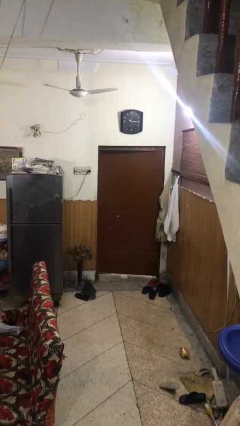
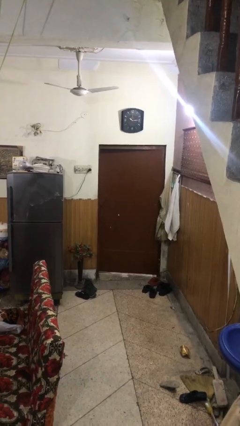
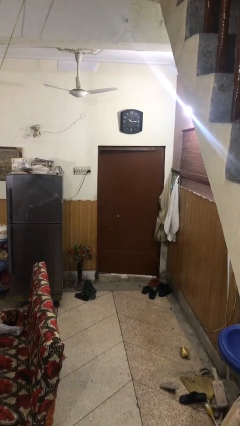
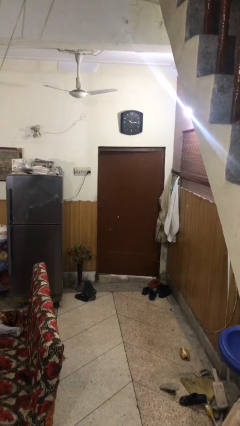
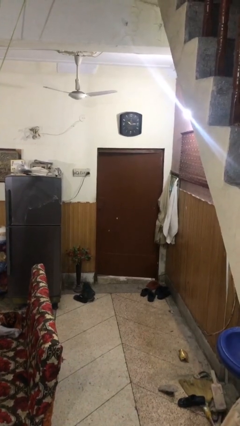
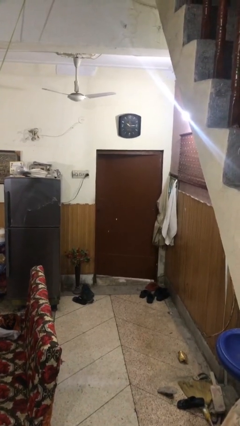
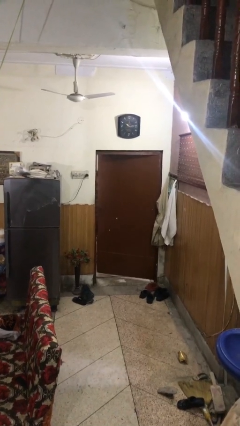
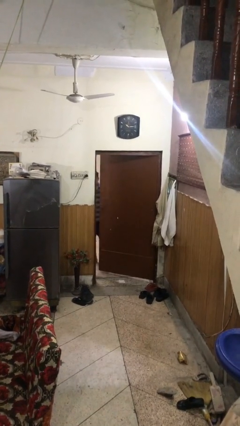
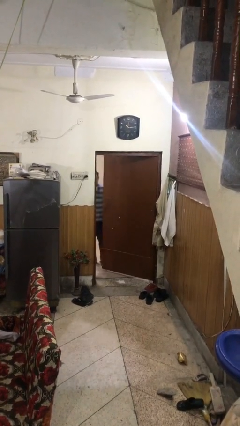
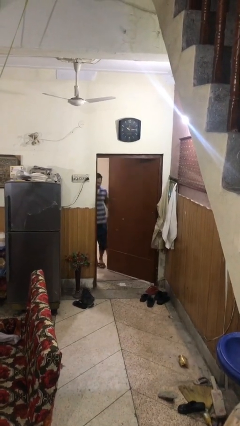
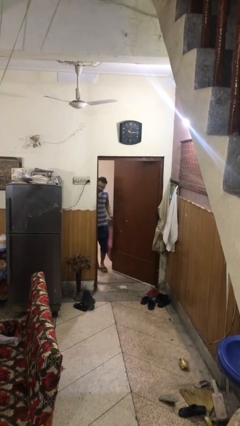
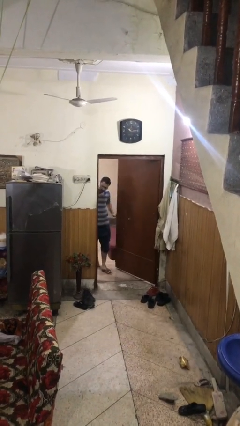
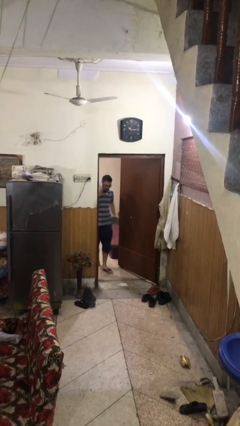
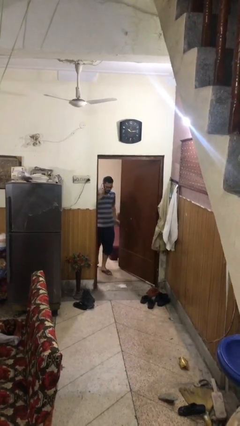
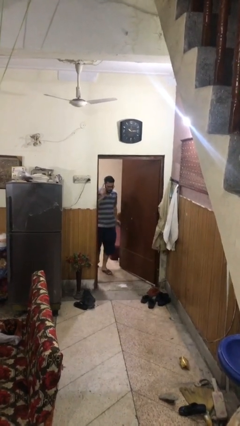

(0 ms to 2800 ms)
person opens facility door

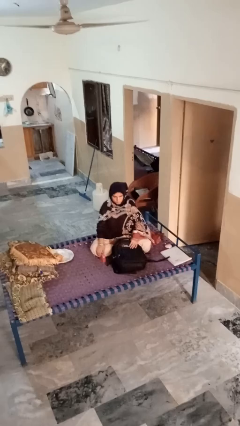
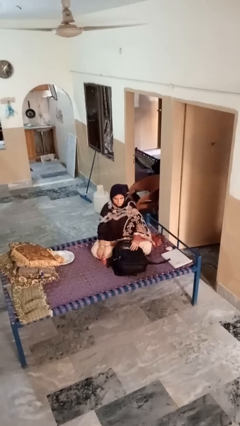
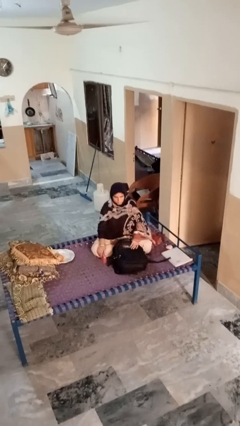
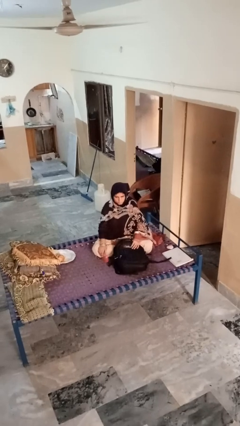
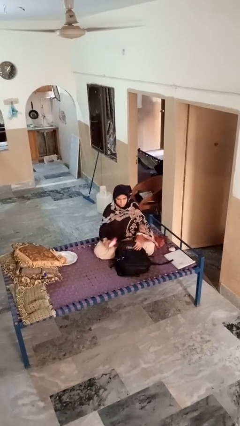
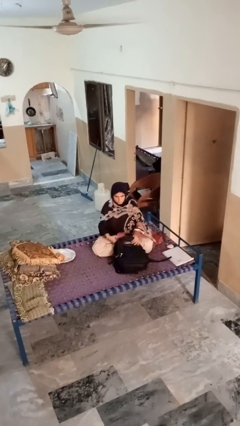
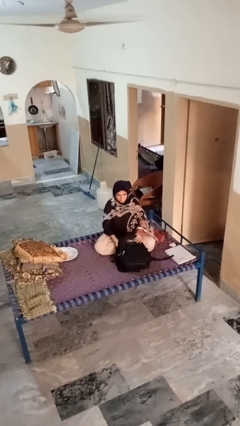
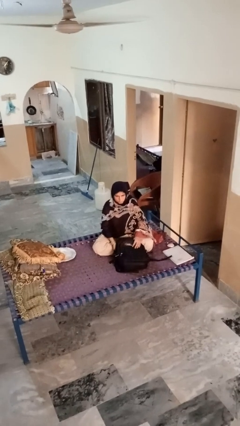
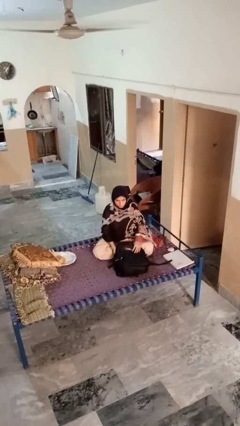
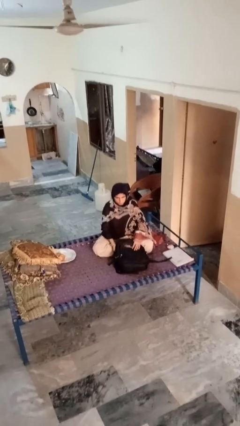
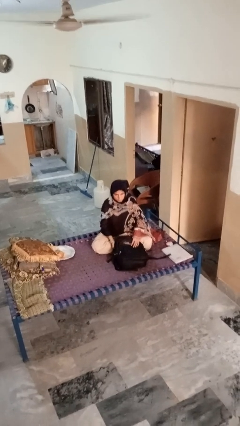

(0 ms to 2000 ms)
person puts object into bag

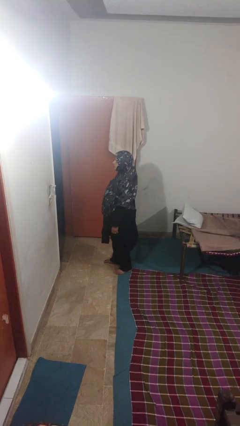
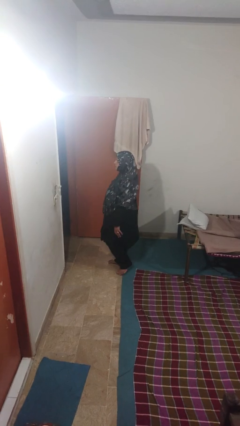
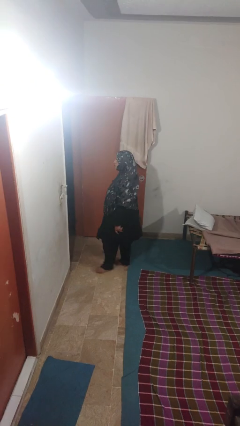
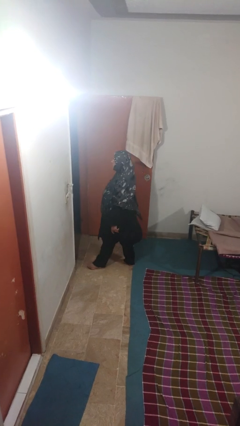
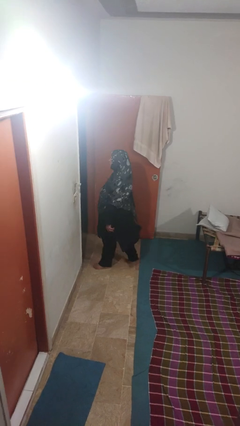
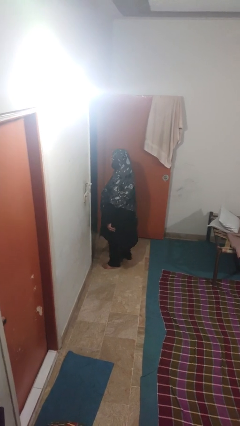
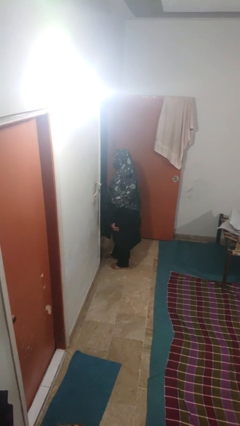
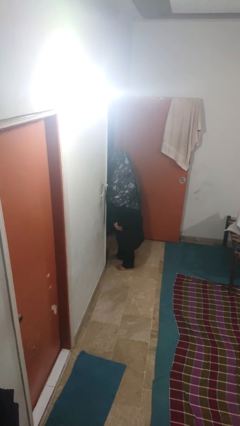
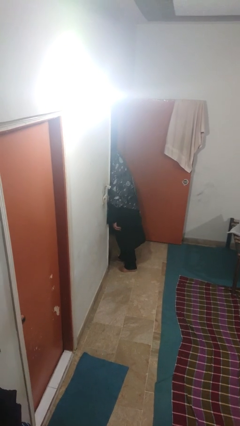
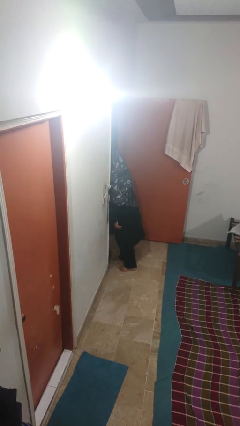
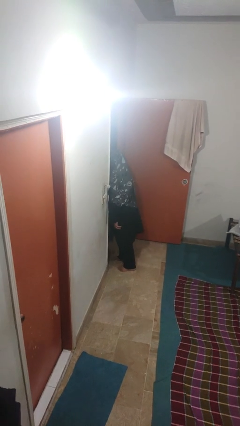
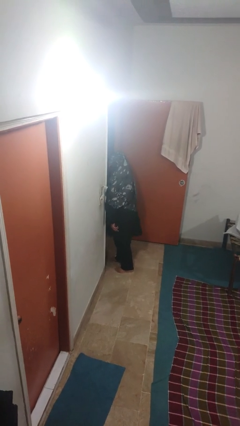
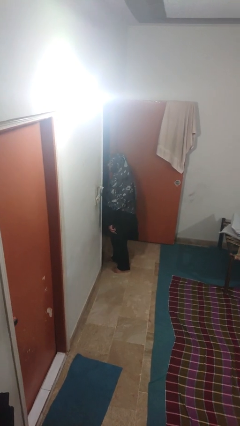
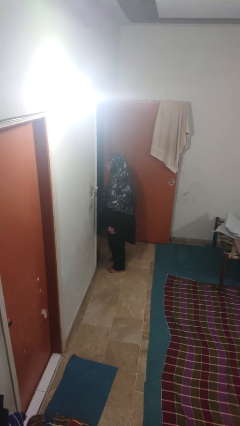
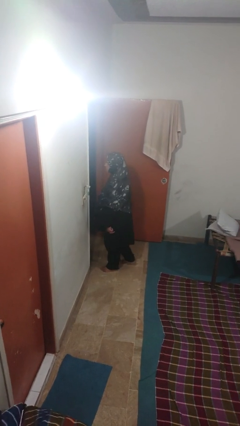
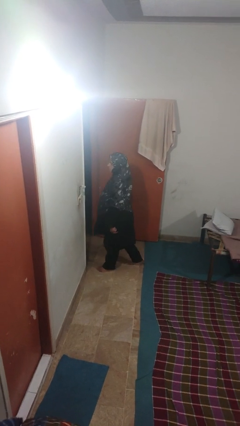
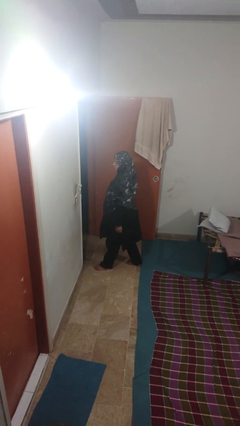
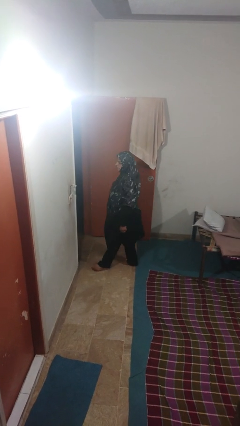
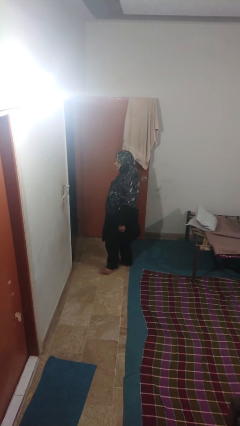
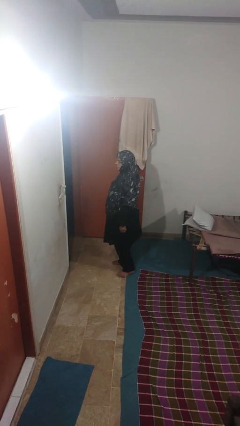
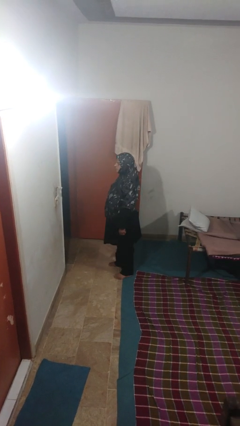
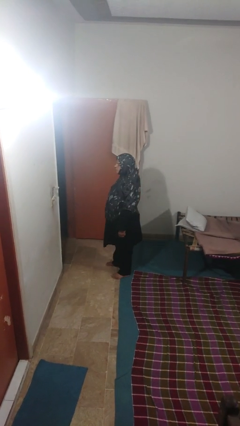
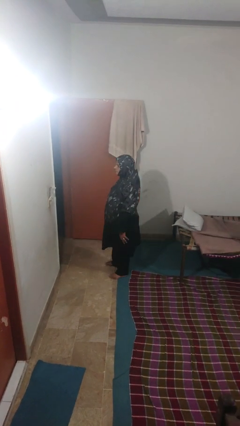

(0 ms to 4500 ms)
person bumps into wall

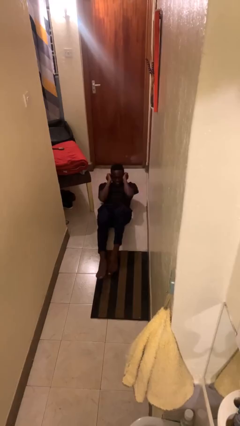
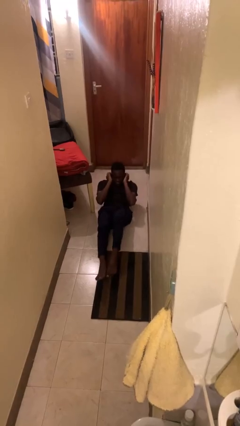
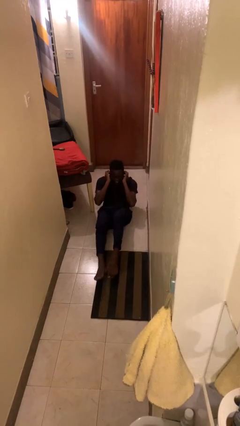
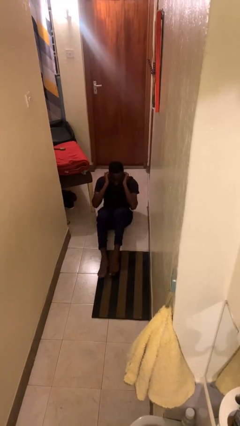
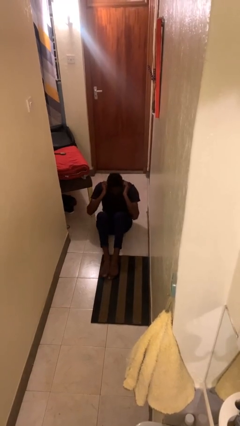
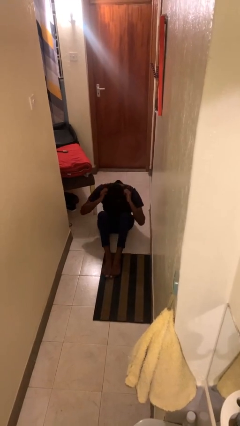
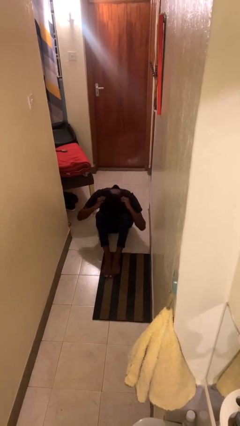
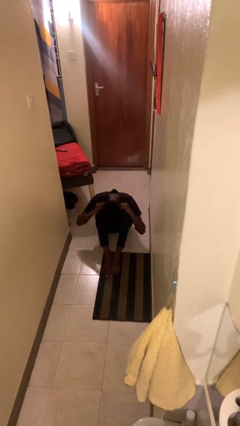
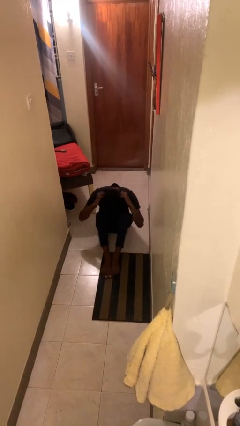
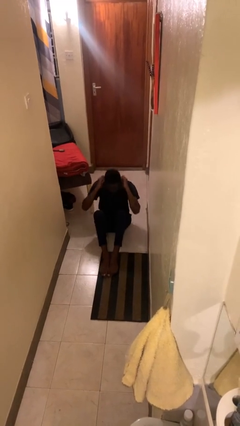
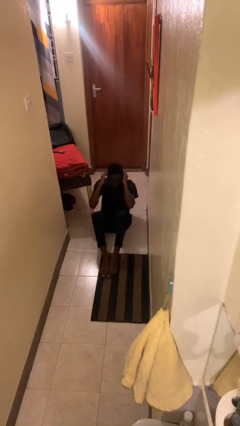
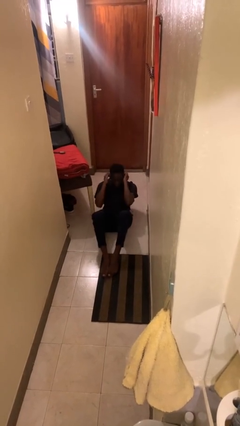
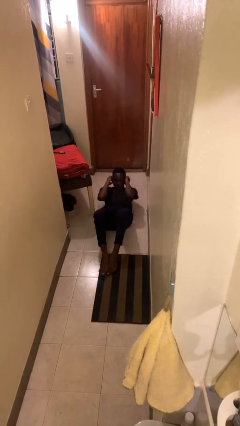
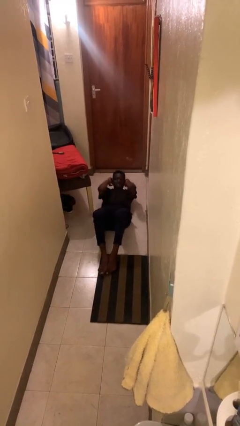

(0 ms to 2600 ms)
person exercises with situp

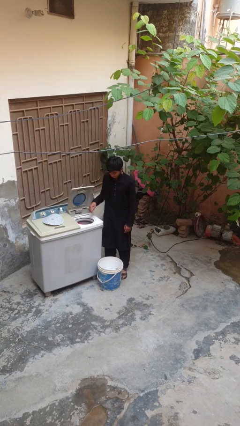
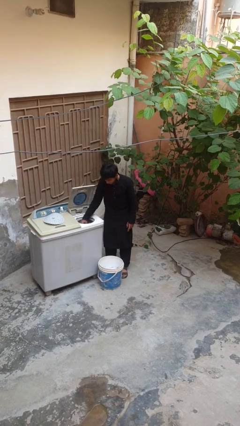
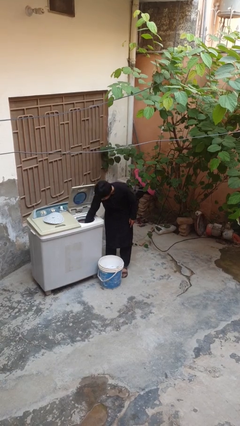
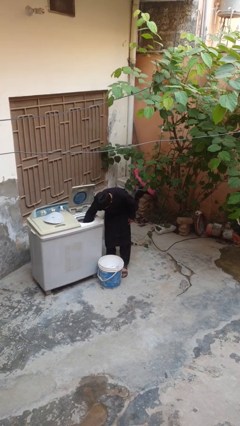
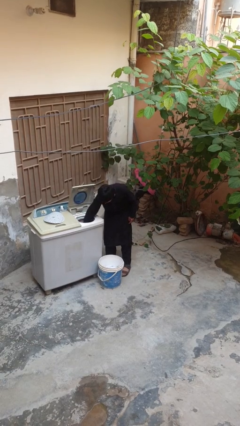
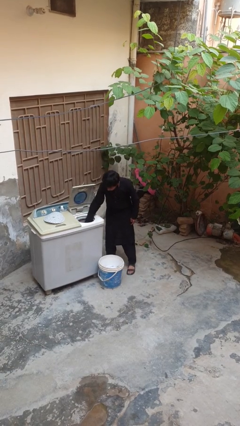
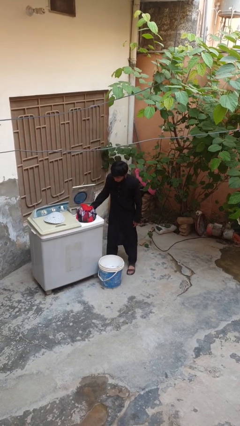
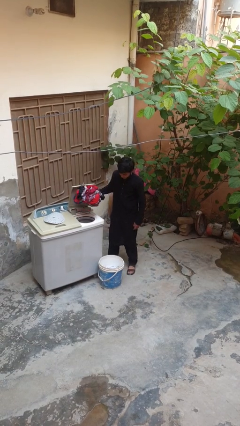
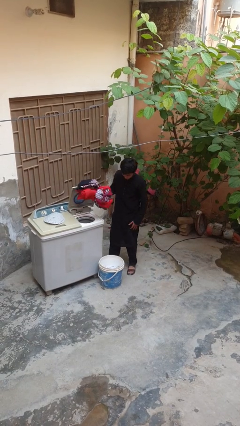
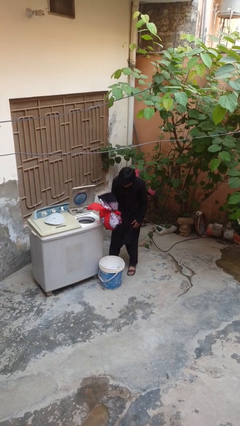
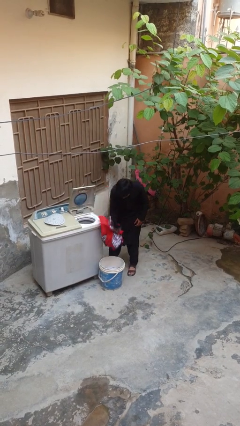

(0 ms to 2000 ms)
person unloads dryer

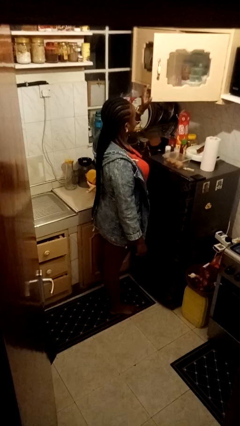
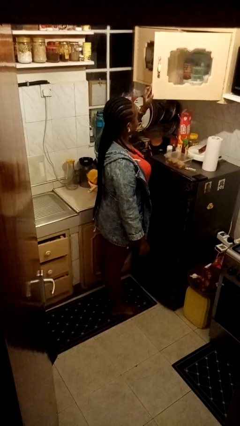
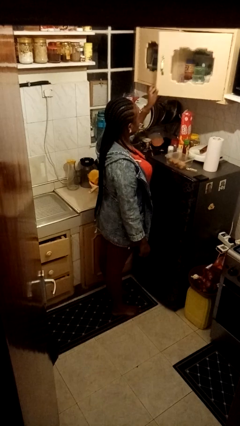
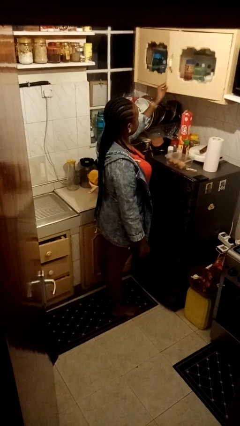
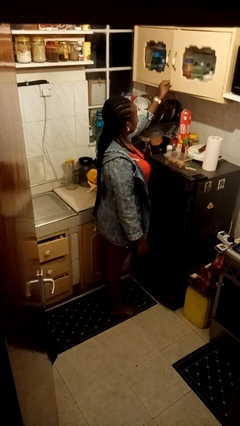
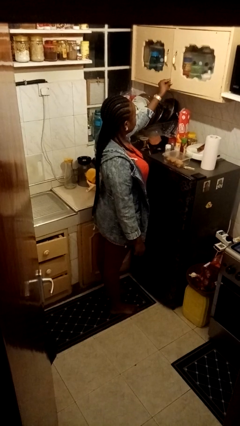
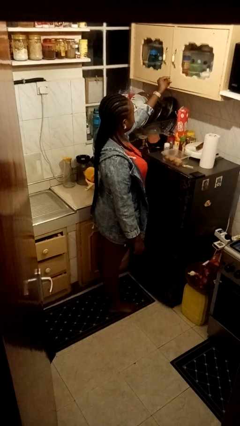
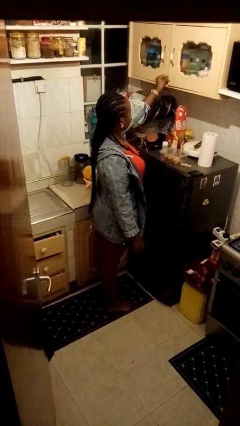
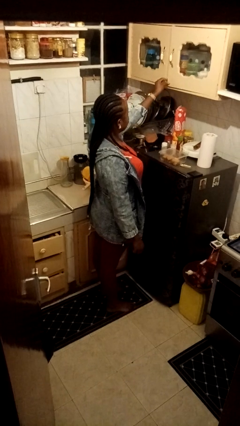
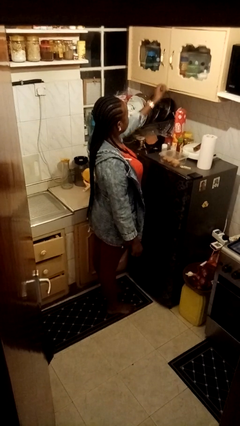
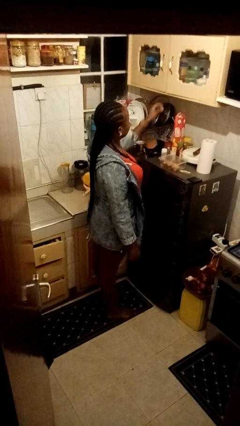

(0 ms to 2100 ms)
person closes cabinet

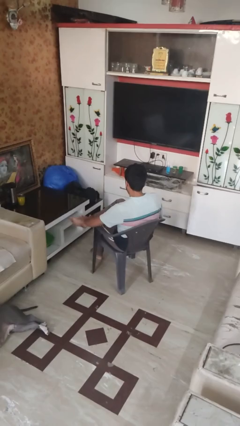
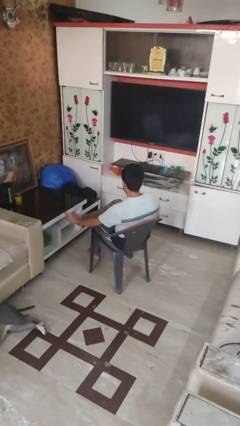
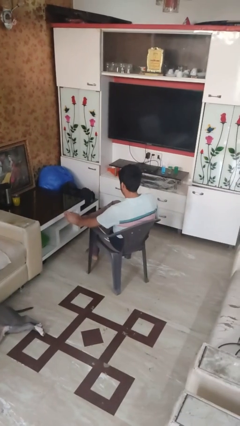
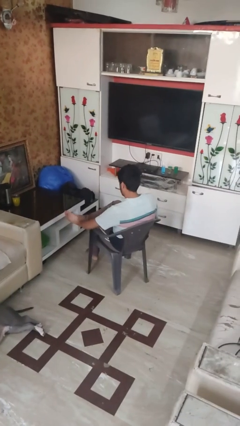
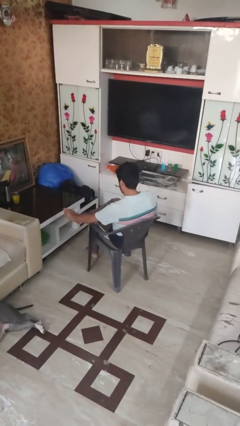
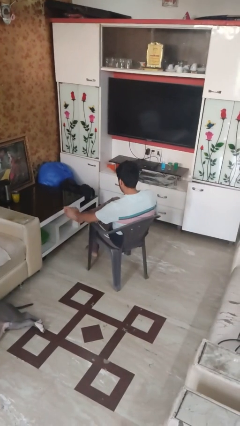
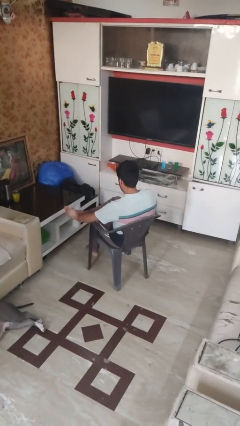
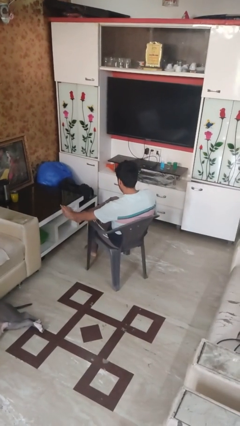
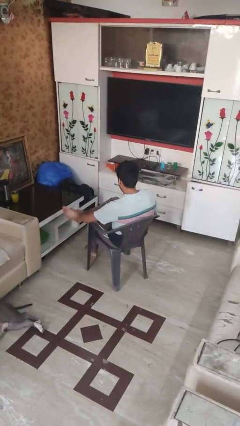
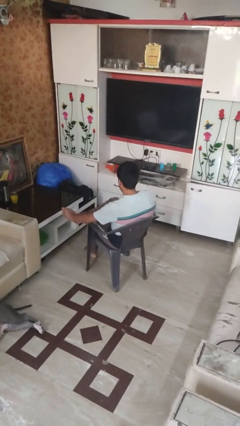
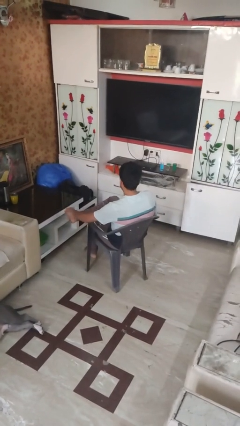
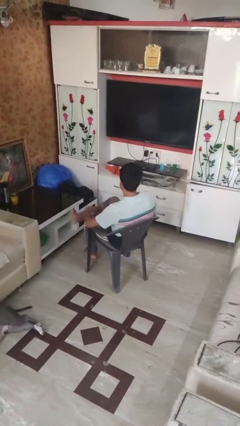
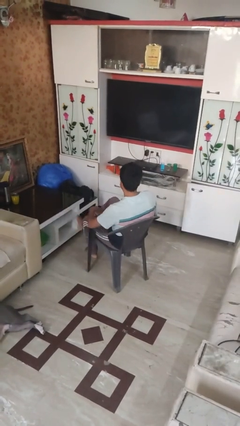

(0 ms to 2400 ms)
person rubs foot
